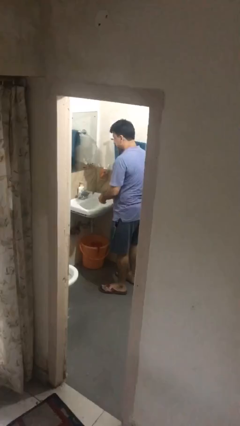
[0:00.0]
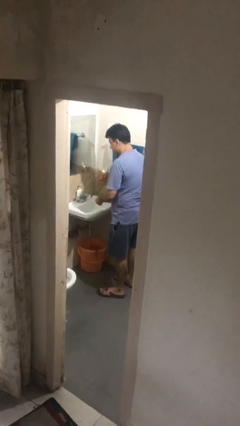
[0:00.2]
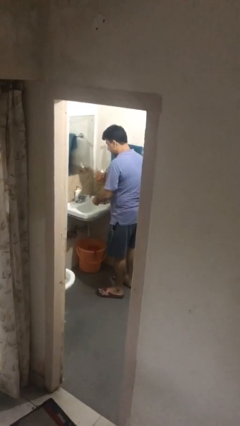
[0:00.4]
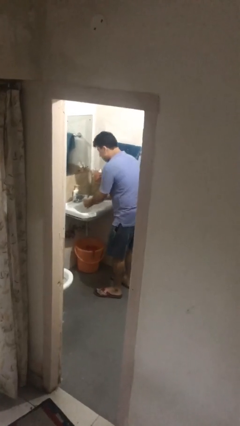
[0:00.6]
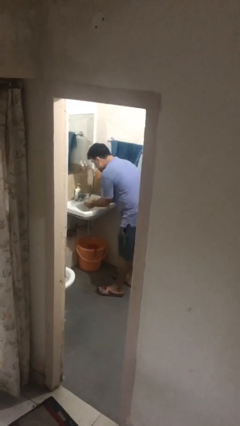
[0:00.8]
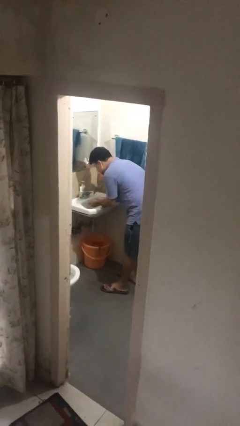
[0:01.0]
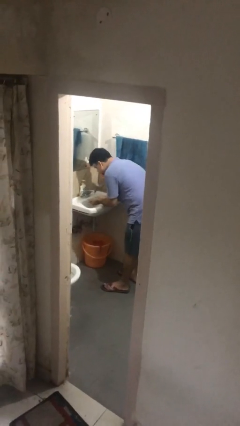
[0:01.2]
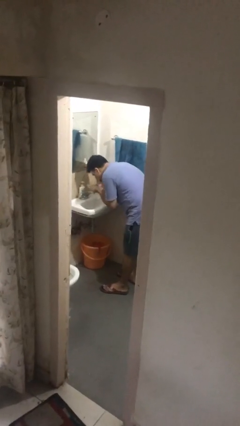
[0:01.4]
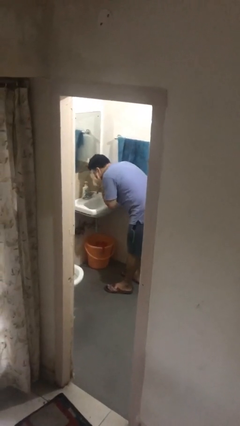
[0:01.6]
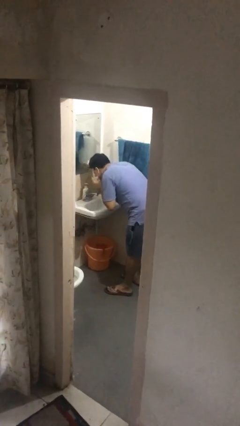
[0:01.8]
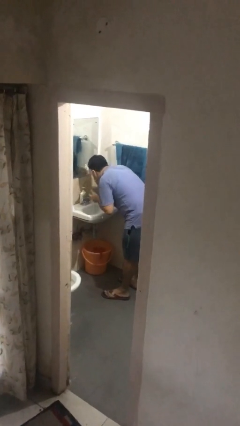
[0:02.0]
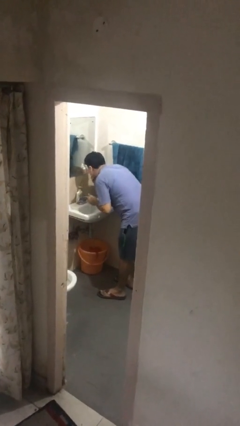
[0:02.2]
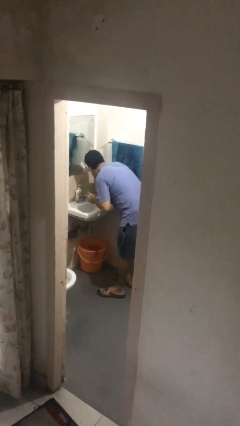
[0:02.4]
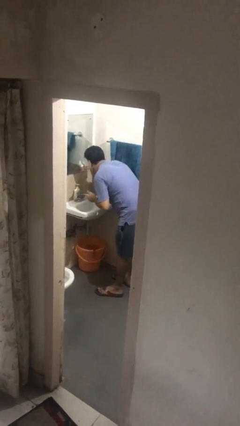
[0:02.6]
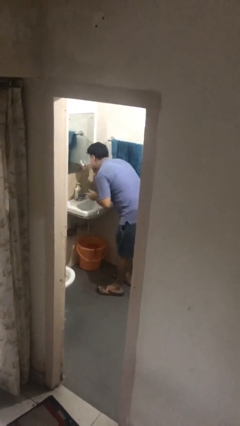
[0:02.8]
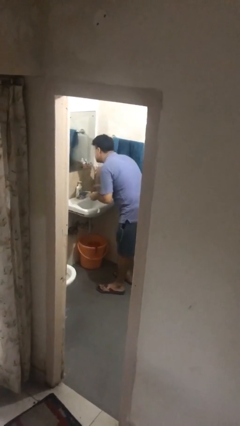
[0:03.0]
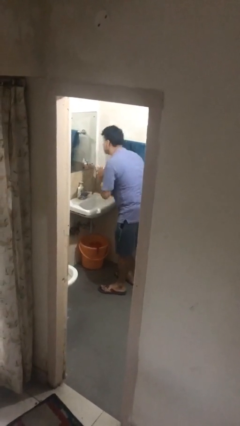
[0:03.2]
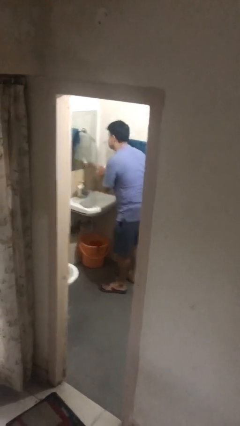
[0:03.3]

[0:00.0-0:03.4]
person washes face

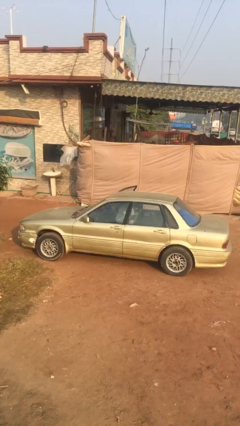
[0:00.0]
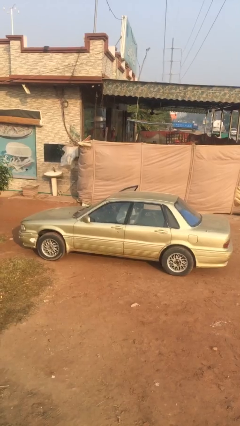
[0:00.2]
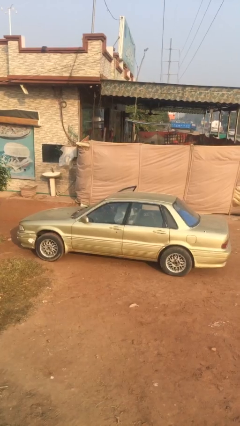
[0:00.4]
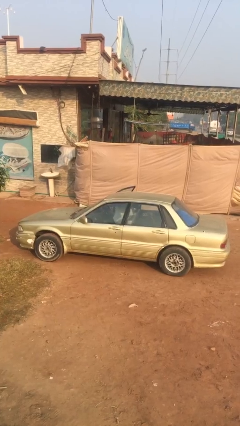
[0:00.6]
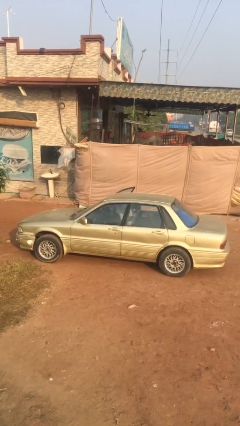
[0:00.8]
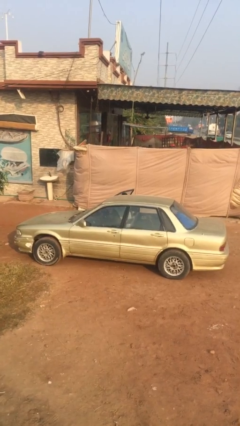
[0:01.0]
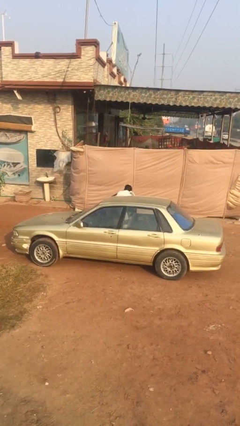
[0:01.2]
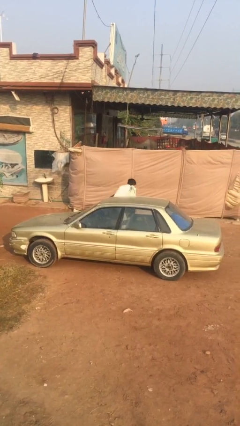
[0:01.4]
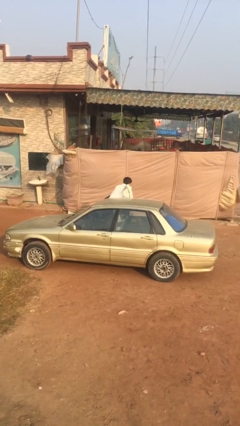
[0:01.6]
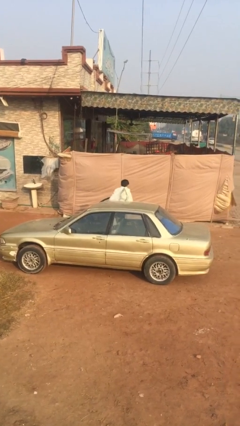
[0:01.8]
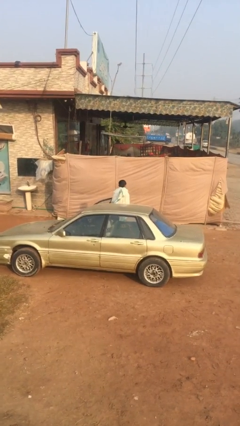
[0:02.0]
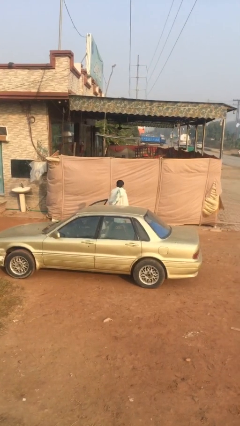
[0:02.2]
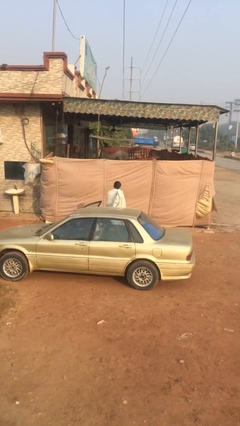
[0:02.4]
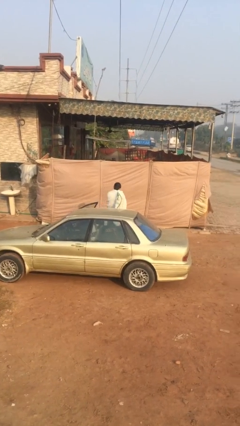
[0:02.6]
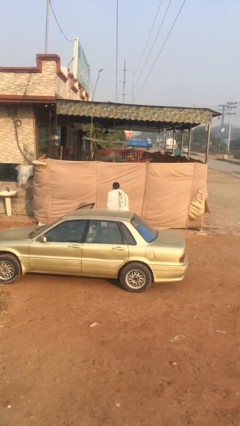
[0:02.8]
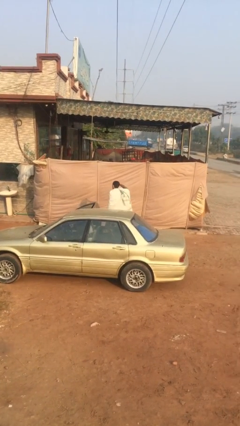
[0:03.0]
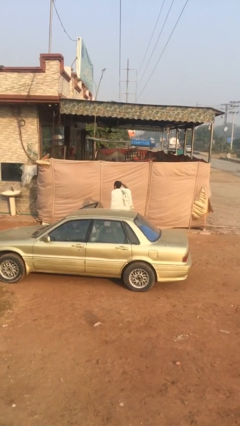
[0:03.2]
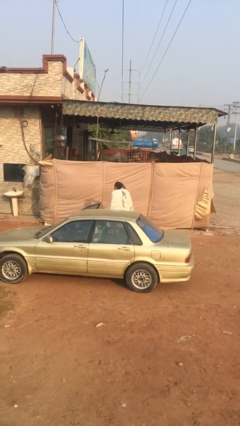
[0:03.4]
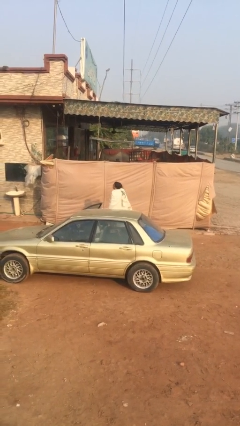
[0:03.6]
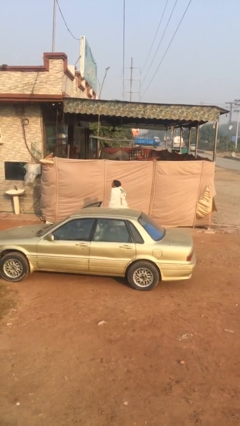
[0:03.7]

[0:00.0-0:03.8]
person exits car

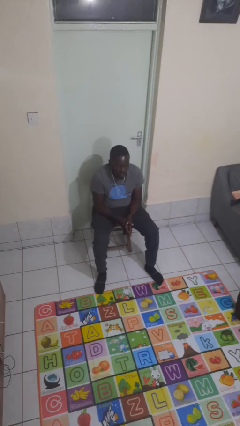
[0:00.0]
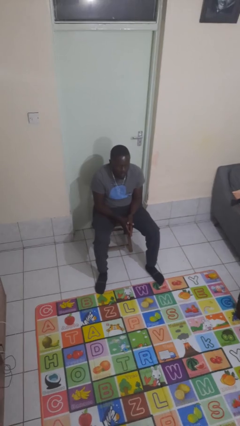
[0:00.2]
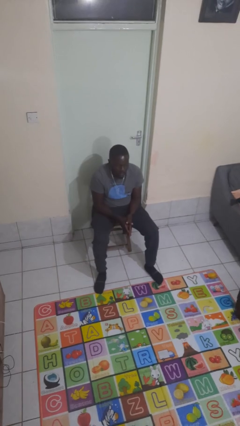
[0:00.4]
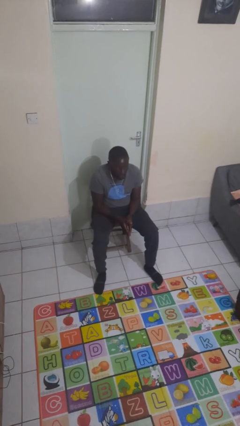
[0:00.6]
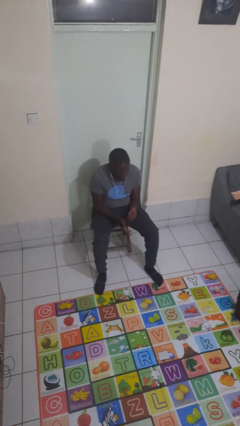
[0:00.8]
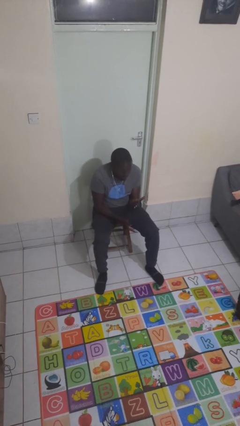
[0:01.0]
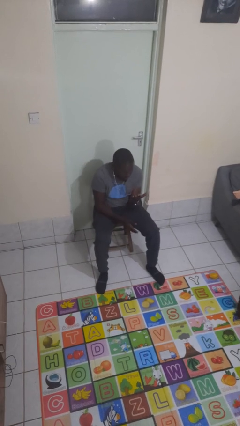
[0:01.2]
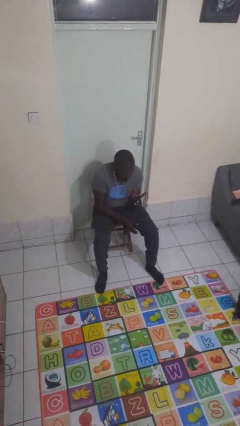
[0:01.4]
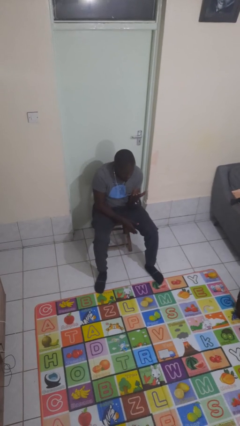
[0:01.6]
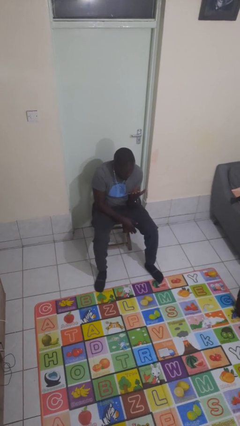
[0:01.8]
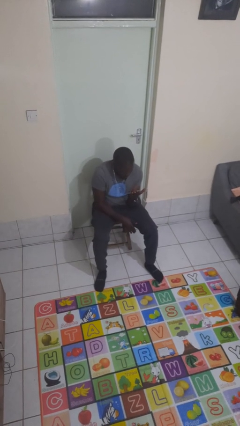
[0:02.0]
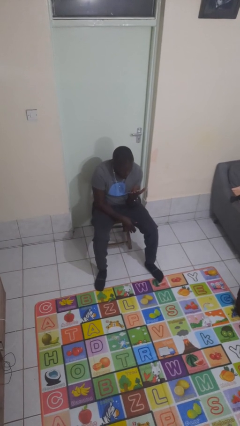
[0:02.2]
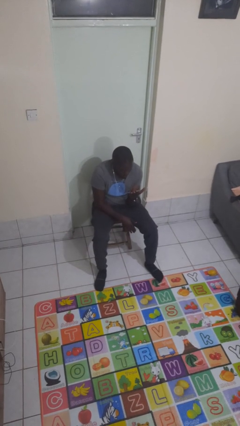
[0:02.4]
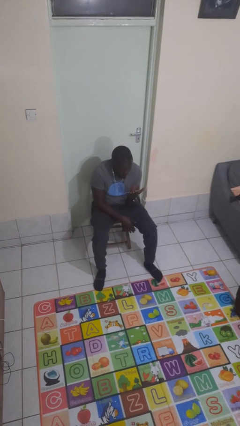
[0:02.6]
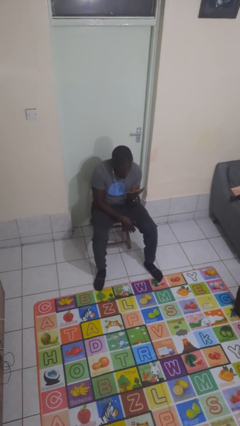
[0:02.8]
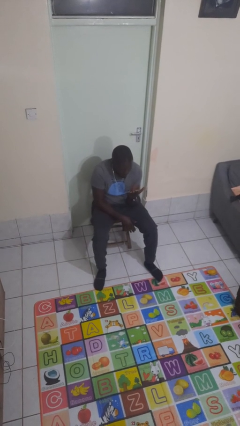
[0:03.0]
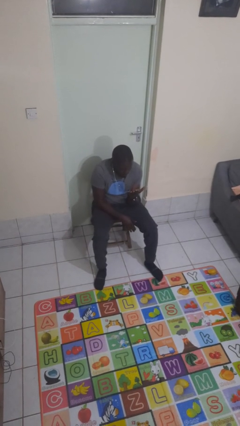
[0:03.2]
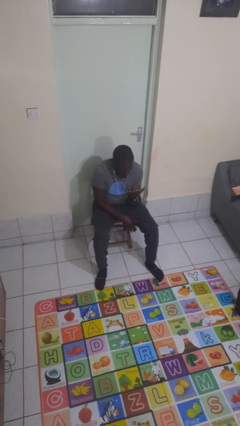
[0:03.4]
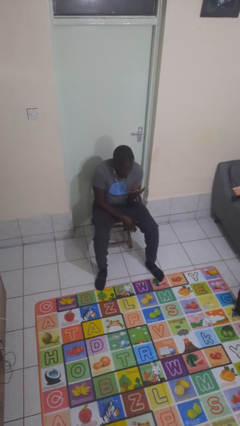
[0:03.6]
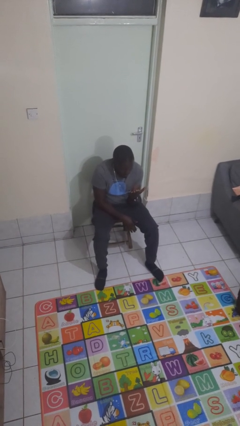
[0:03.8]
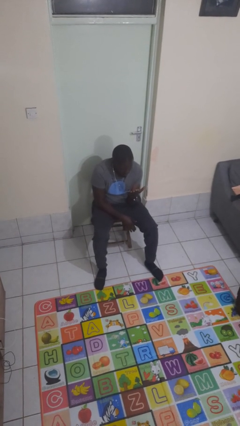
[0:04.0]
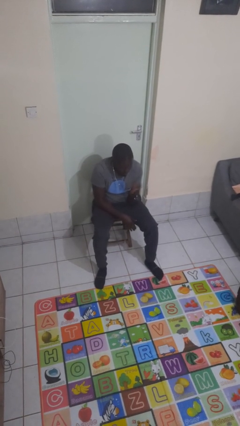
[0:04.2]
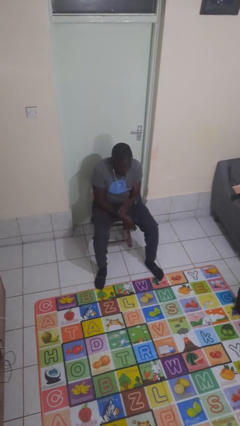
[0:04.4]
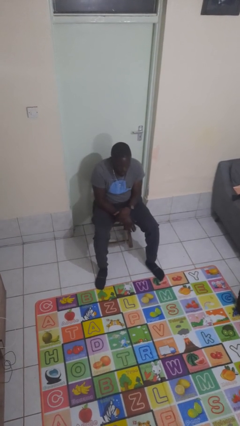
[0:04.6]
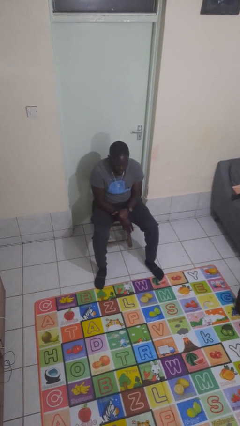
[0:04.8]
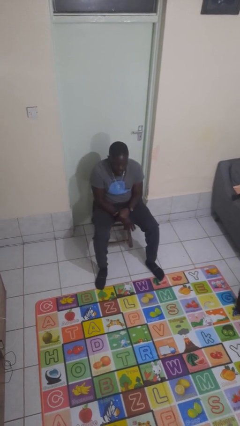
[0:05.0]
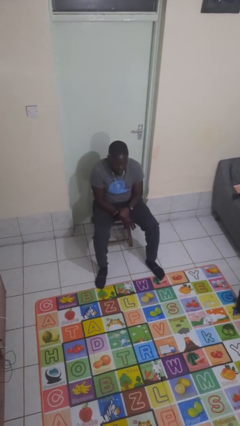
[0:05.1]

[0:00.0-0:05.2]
person looks at hands in lap

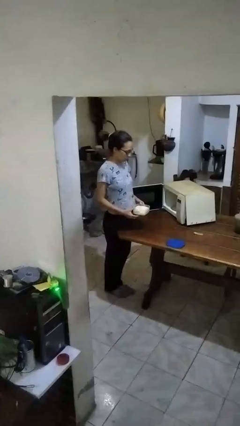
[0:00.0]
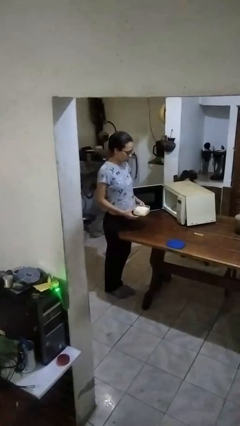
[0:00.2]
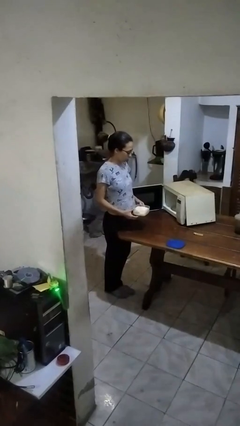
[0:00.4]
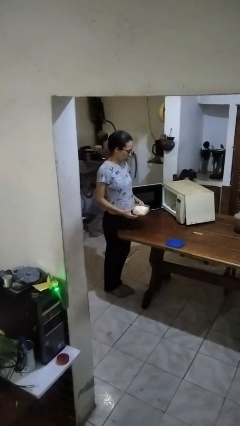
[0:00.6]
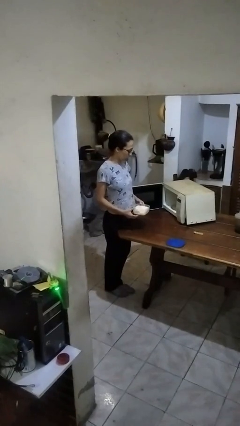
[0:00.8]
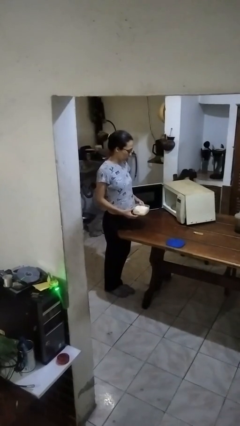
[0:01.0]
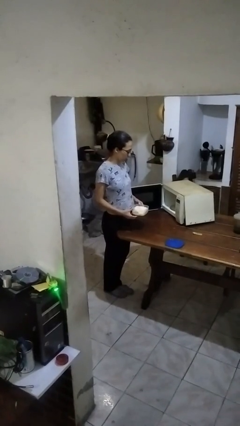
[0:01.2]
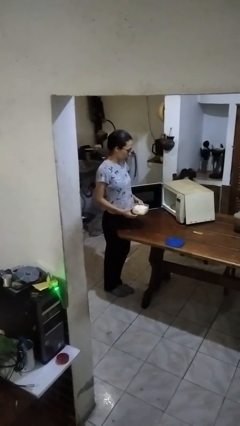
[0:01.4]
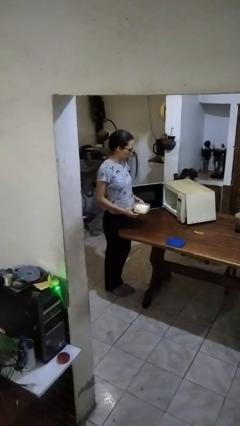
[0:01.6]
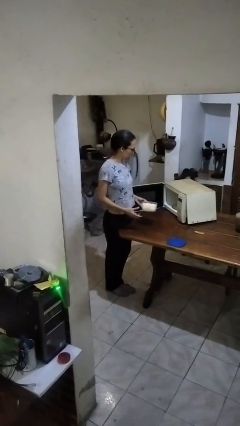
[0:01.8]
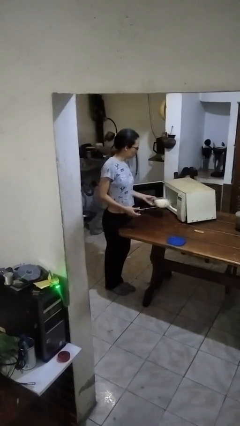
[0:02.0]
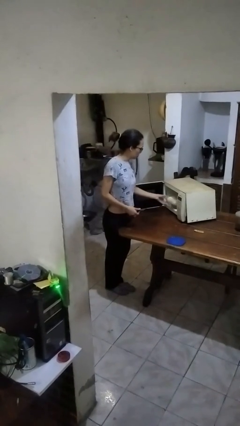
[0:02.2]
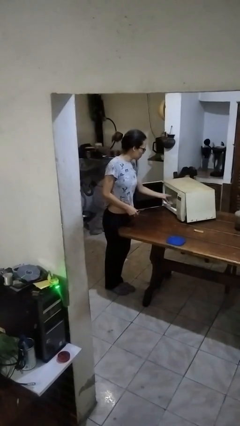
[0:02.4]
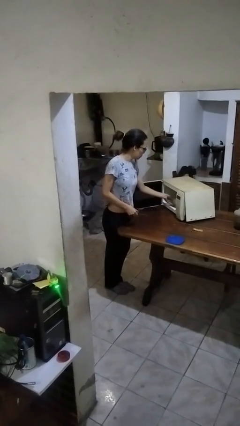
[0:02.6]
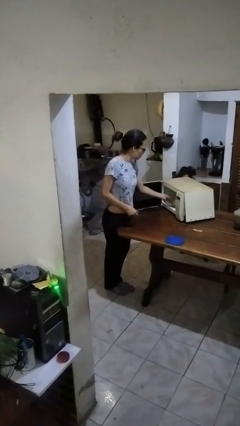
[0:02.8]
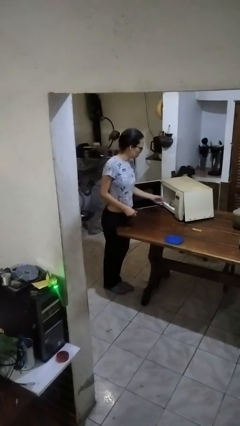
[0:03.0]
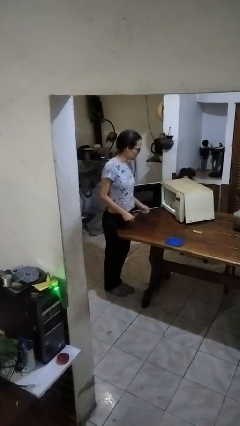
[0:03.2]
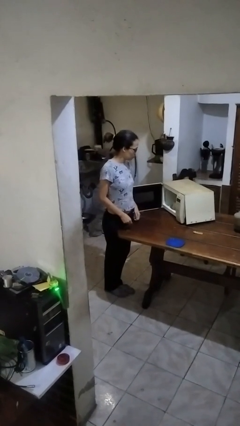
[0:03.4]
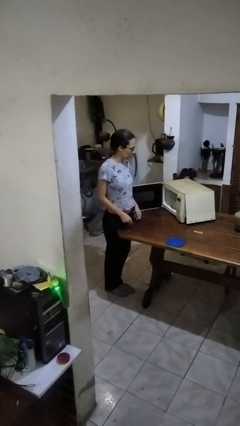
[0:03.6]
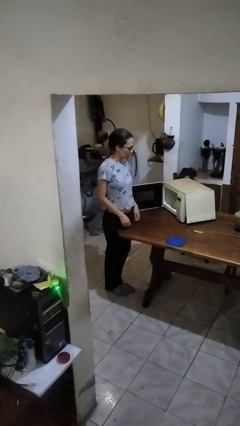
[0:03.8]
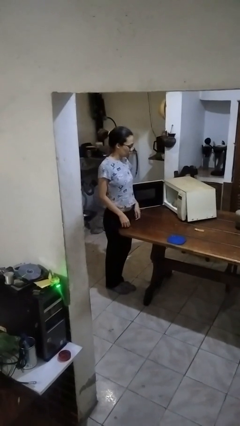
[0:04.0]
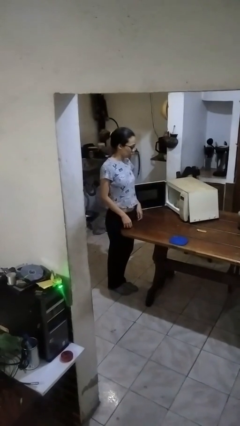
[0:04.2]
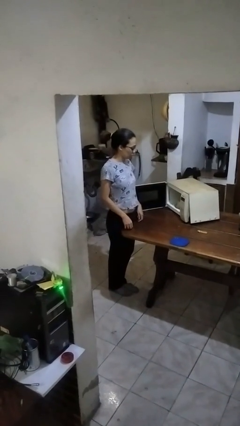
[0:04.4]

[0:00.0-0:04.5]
person puts object into microwave

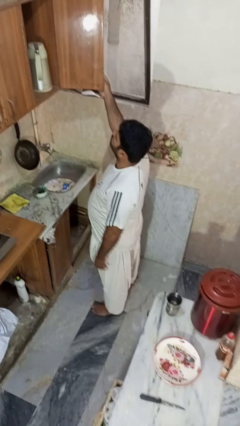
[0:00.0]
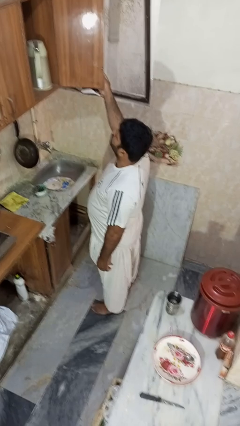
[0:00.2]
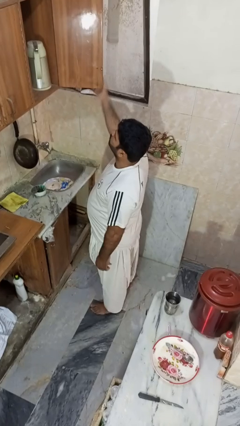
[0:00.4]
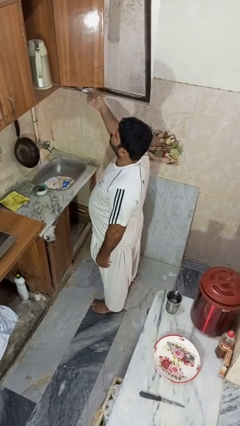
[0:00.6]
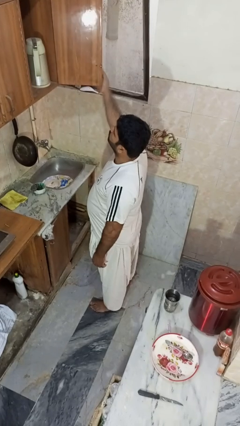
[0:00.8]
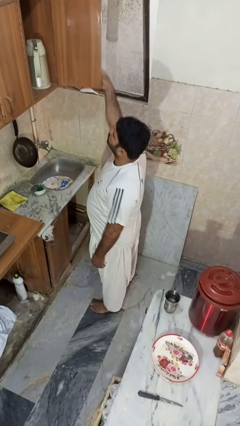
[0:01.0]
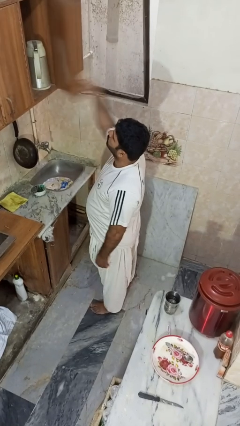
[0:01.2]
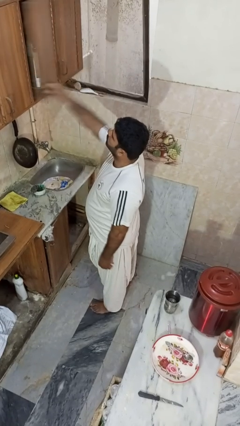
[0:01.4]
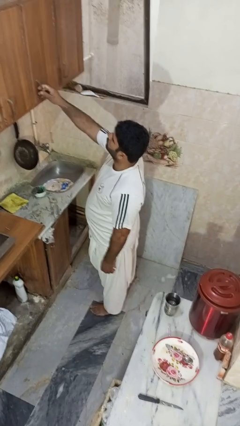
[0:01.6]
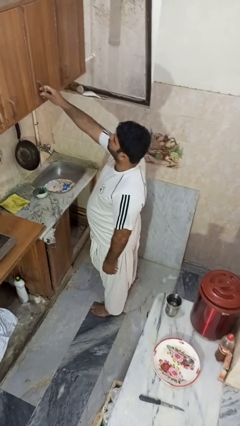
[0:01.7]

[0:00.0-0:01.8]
person closes cabinet
